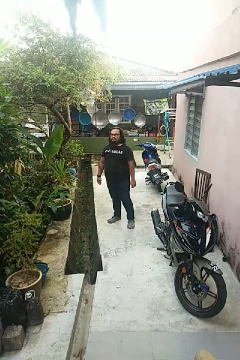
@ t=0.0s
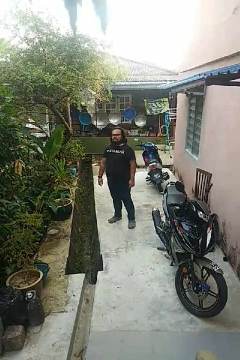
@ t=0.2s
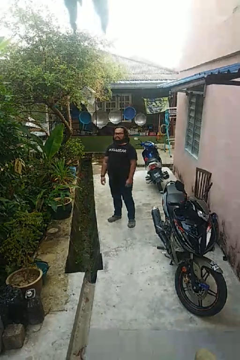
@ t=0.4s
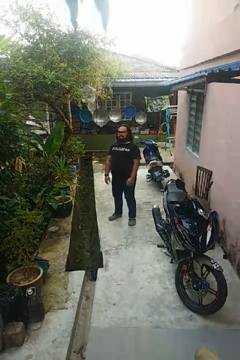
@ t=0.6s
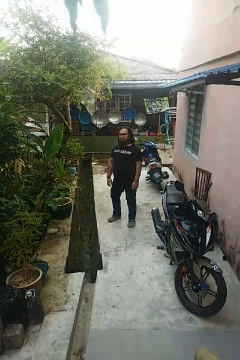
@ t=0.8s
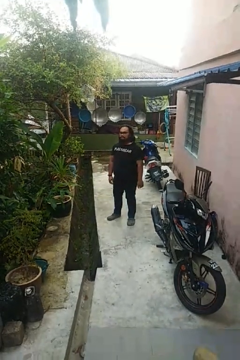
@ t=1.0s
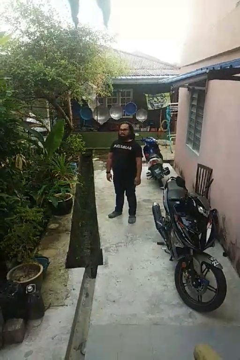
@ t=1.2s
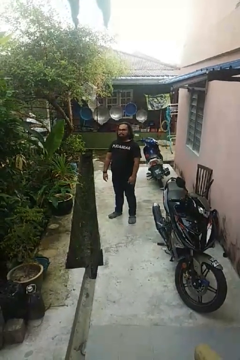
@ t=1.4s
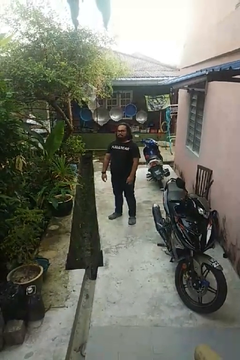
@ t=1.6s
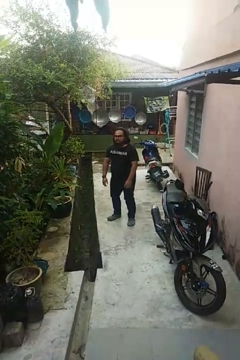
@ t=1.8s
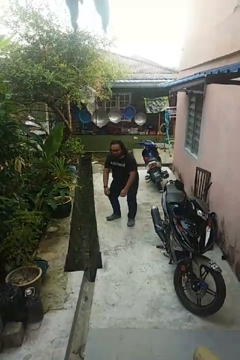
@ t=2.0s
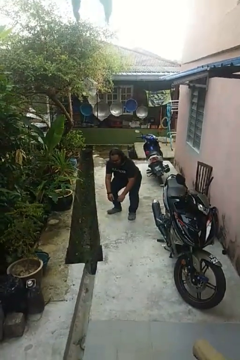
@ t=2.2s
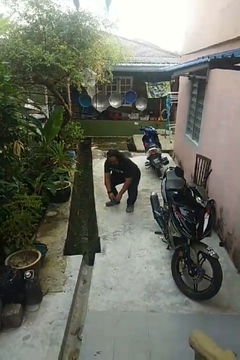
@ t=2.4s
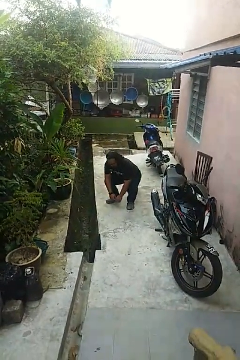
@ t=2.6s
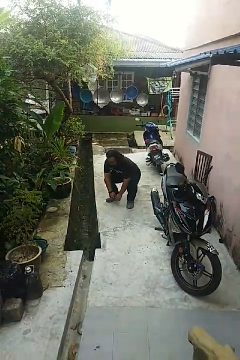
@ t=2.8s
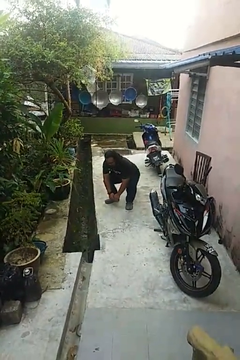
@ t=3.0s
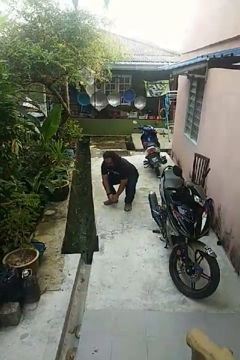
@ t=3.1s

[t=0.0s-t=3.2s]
person squats

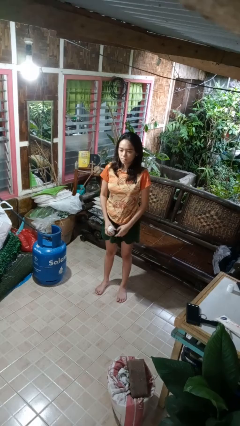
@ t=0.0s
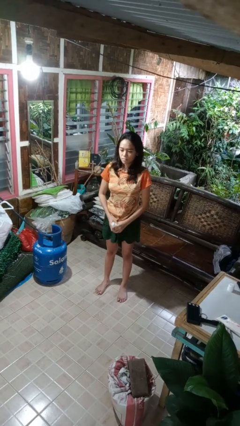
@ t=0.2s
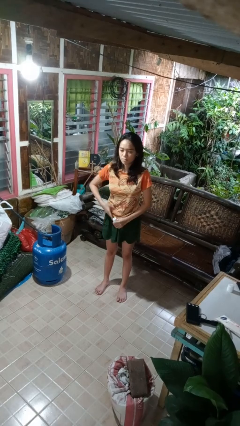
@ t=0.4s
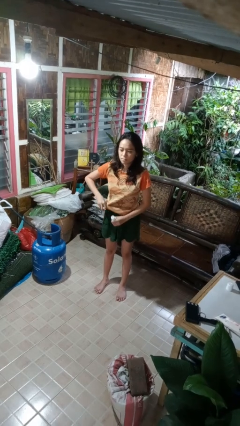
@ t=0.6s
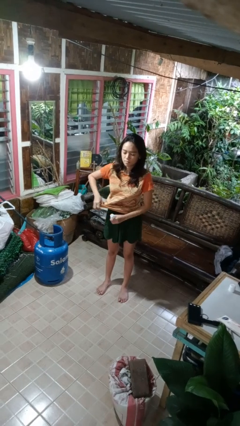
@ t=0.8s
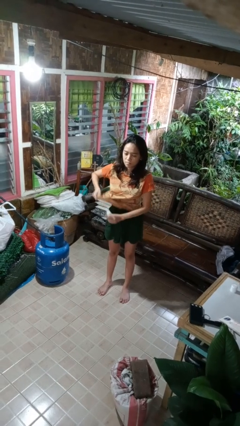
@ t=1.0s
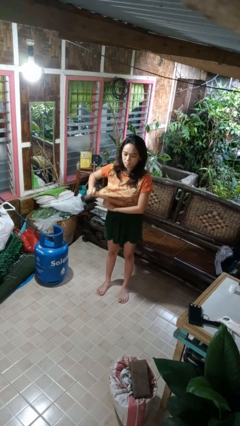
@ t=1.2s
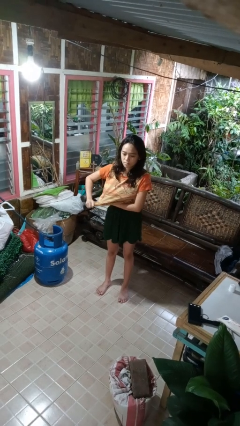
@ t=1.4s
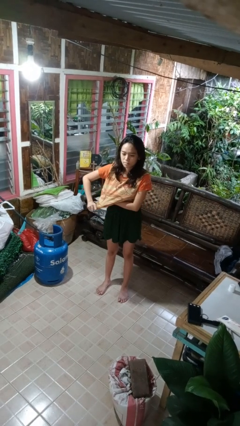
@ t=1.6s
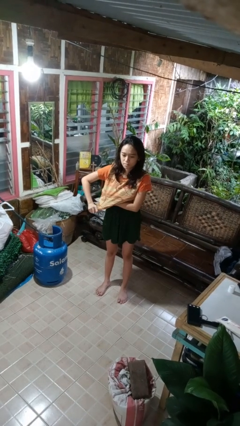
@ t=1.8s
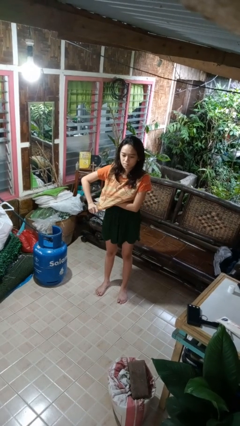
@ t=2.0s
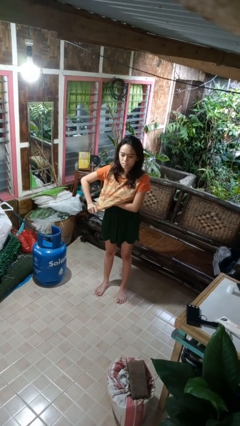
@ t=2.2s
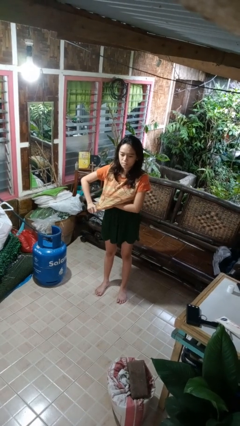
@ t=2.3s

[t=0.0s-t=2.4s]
person applies deodorant

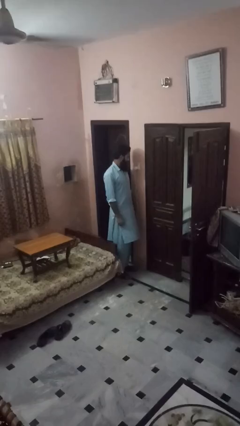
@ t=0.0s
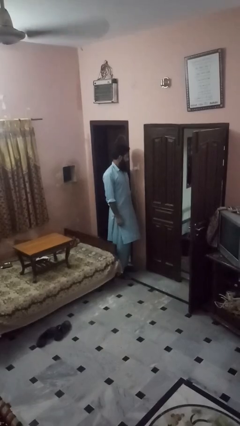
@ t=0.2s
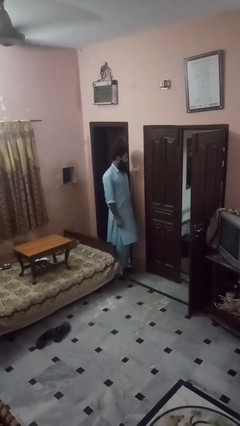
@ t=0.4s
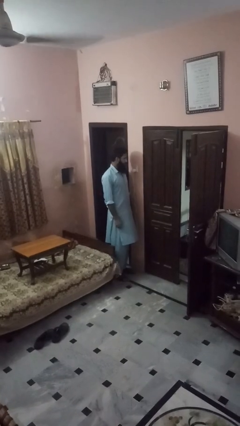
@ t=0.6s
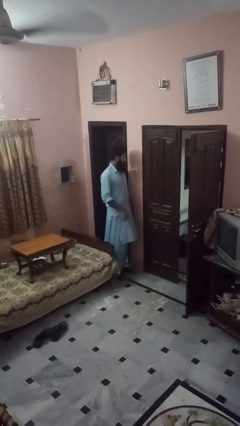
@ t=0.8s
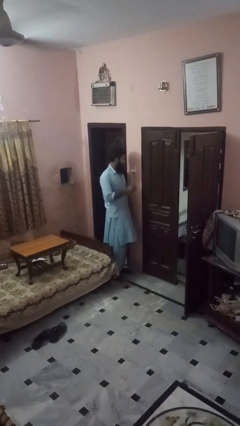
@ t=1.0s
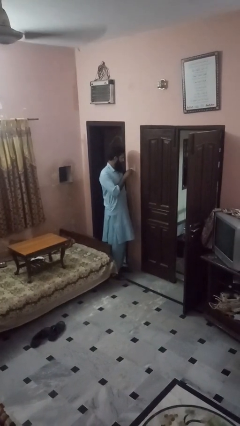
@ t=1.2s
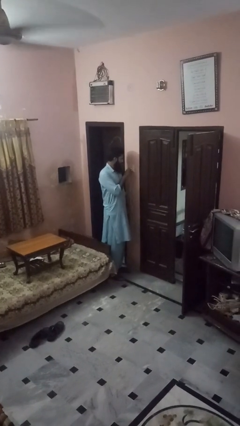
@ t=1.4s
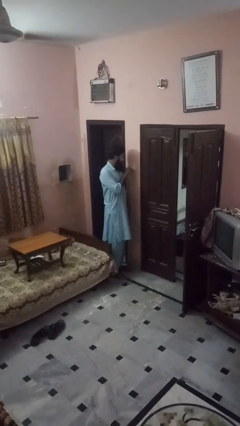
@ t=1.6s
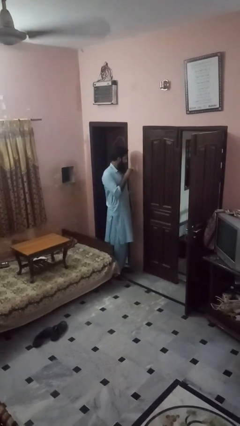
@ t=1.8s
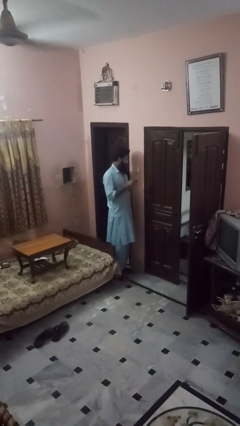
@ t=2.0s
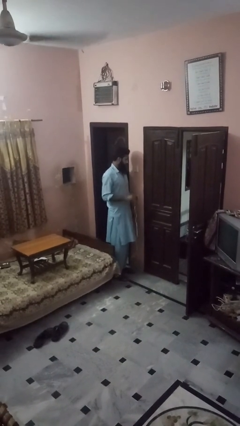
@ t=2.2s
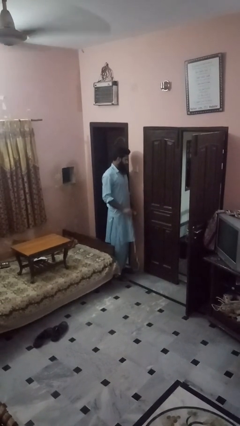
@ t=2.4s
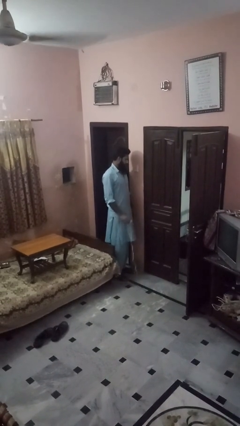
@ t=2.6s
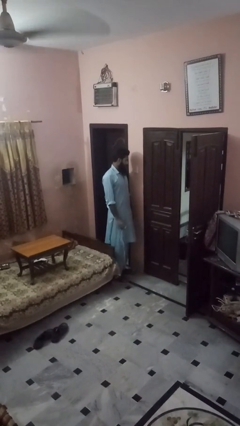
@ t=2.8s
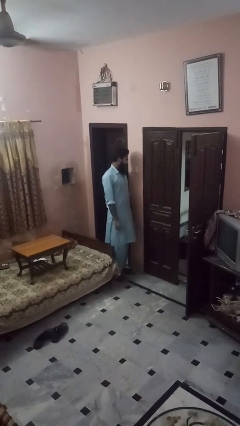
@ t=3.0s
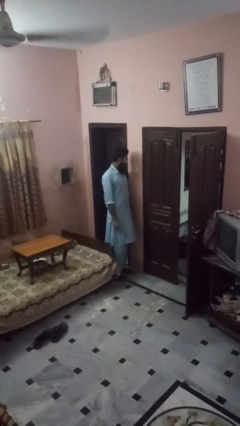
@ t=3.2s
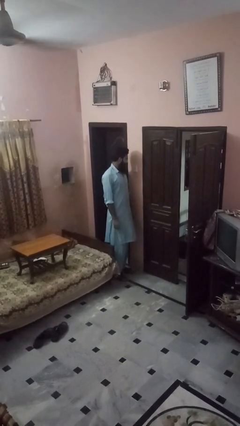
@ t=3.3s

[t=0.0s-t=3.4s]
person unplugs from electrical socket

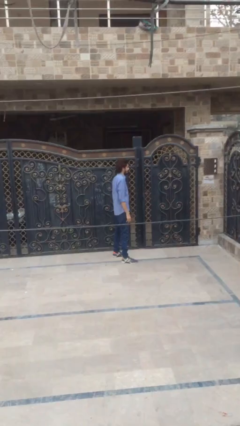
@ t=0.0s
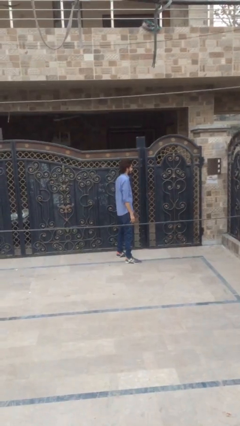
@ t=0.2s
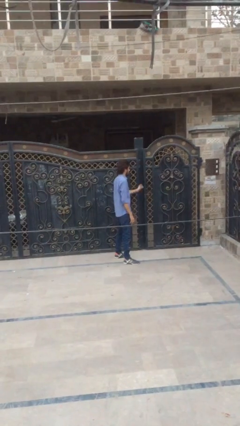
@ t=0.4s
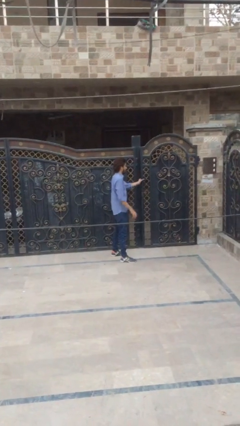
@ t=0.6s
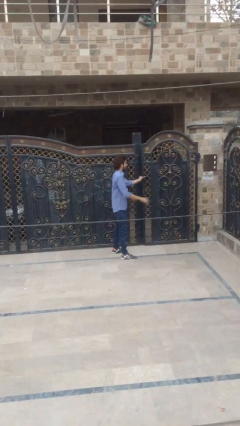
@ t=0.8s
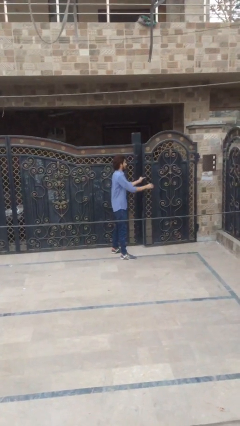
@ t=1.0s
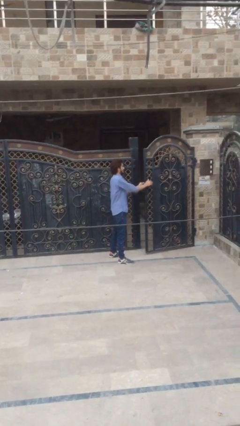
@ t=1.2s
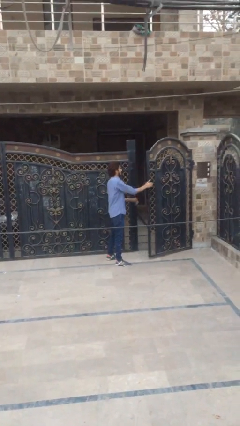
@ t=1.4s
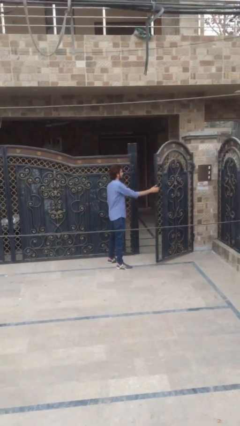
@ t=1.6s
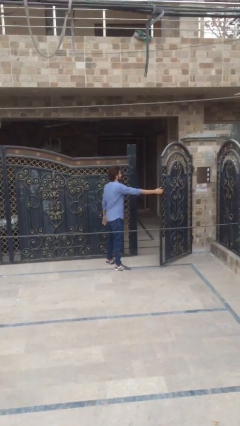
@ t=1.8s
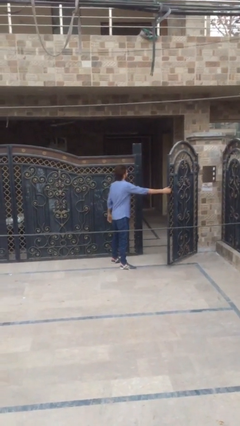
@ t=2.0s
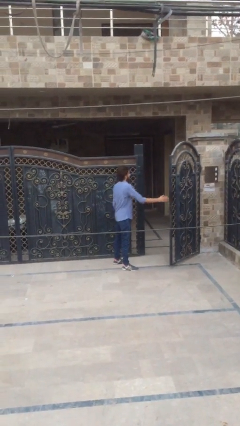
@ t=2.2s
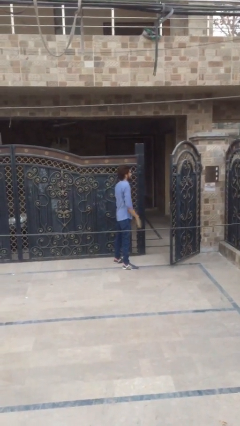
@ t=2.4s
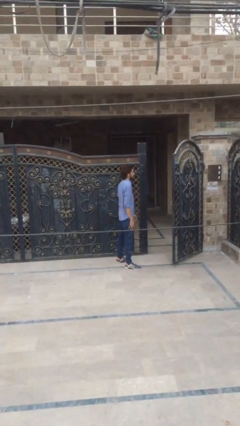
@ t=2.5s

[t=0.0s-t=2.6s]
person opens facility door

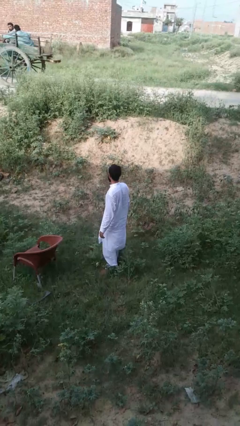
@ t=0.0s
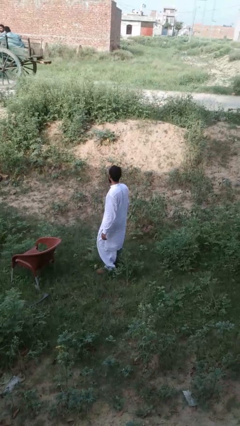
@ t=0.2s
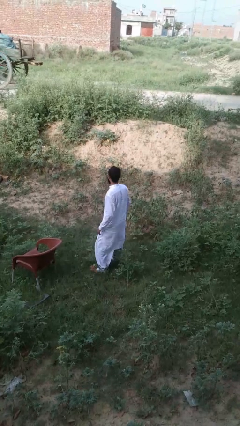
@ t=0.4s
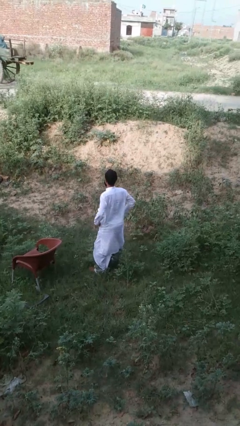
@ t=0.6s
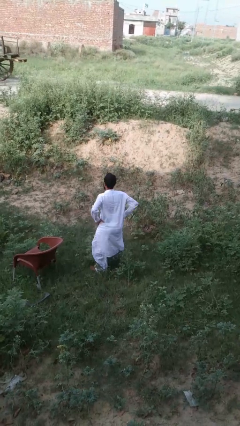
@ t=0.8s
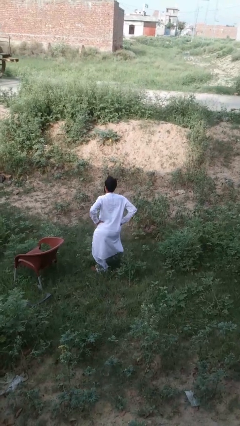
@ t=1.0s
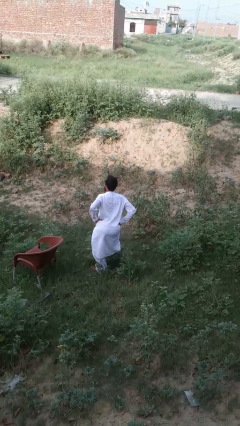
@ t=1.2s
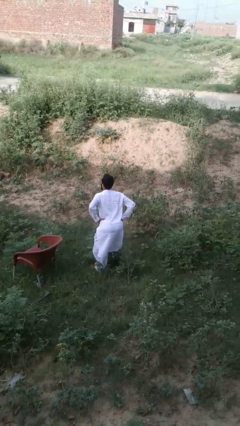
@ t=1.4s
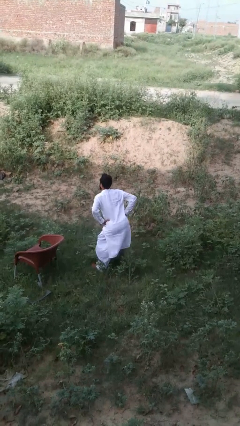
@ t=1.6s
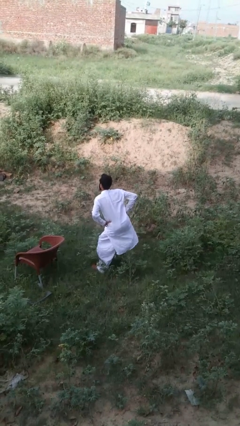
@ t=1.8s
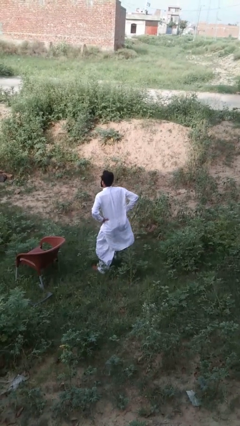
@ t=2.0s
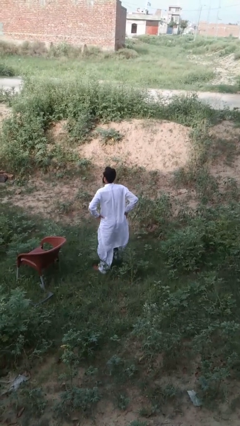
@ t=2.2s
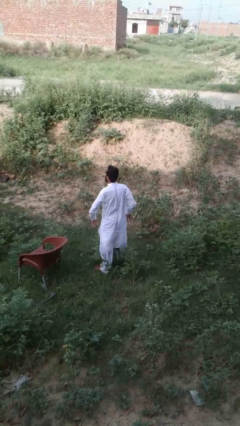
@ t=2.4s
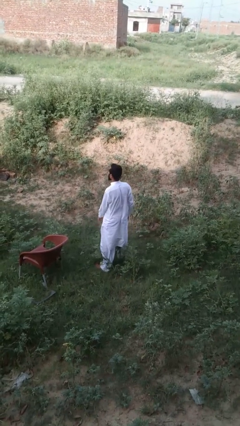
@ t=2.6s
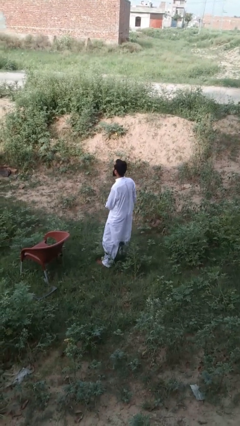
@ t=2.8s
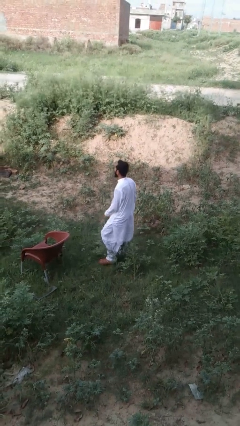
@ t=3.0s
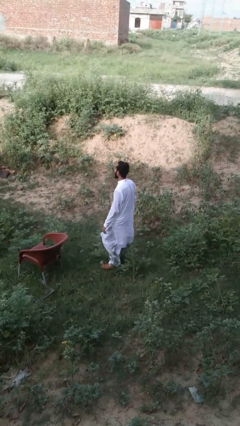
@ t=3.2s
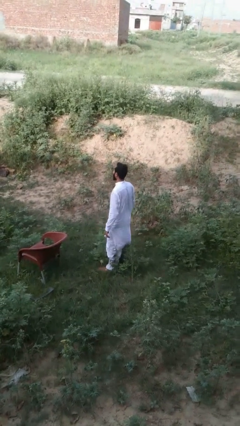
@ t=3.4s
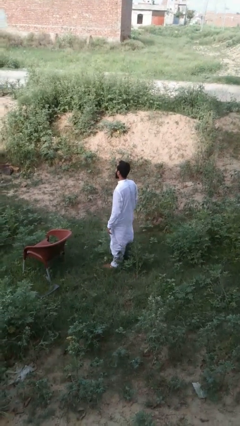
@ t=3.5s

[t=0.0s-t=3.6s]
person wiggles hips

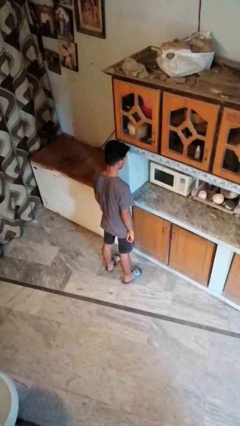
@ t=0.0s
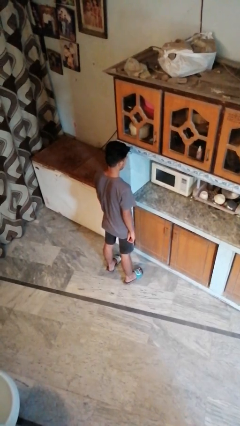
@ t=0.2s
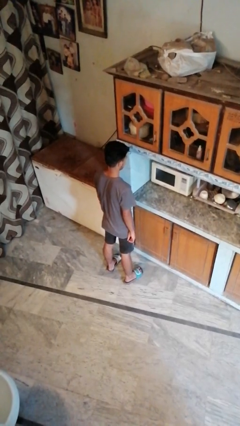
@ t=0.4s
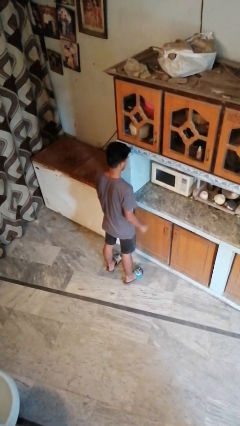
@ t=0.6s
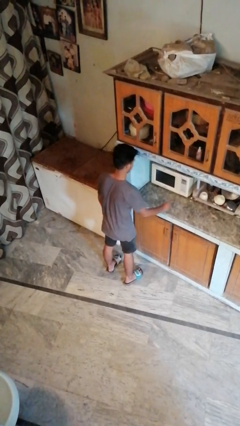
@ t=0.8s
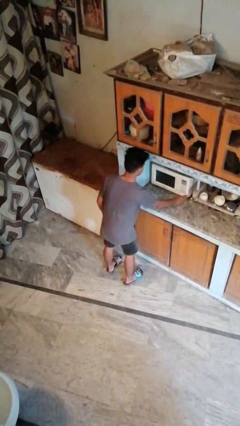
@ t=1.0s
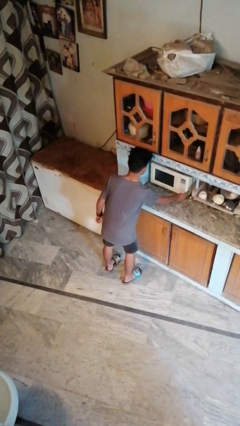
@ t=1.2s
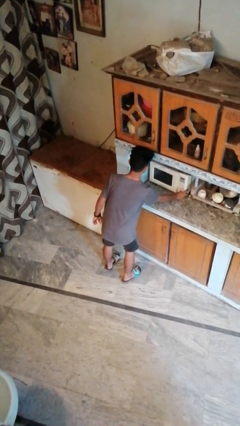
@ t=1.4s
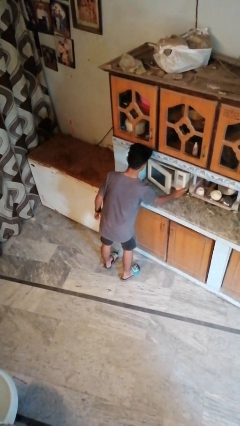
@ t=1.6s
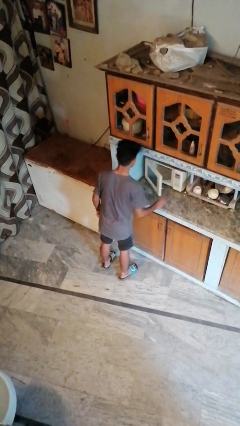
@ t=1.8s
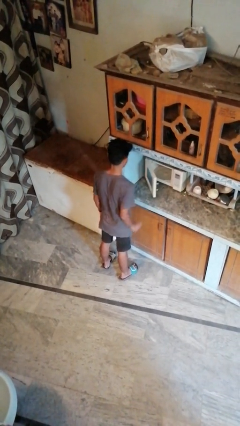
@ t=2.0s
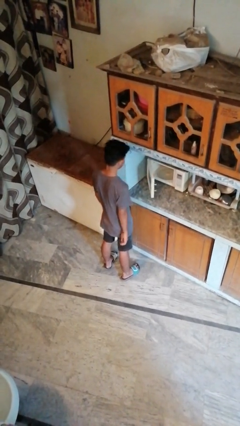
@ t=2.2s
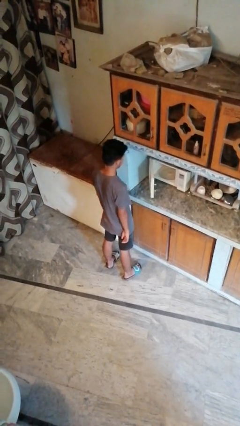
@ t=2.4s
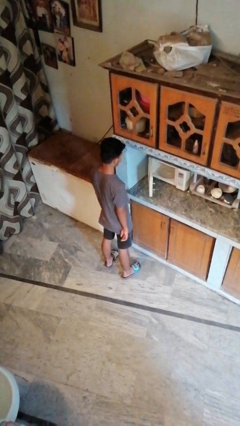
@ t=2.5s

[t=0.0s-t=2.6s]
person opens oven door
